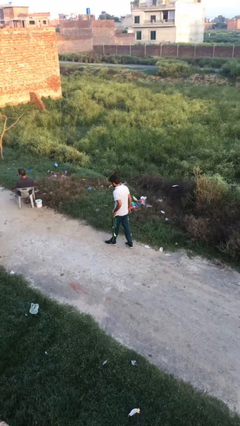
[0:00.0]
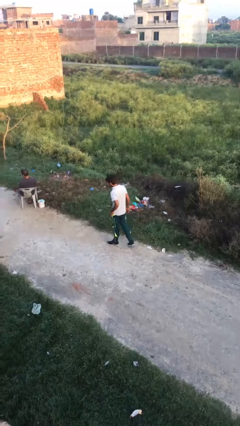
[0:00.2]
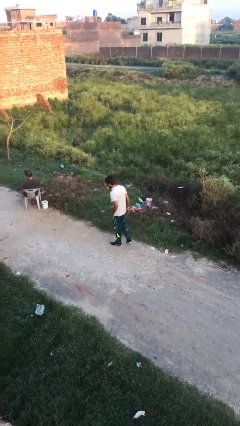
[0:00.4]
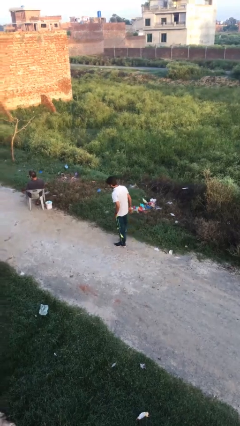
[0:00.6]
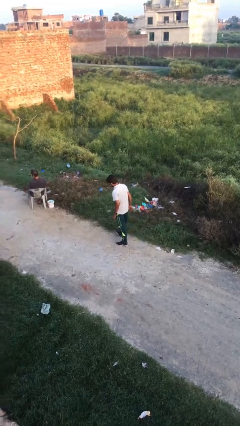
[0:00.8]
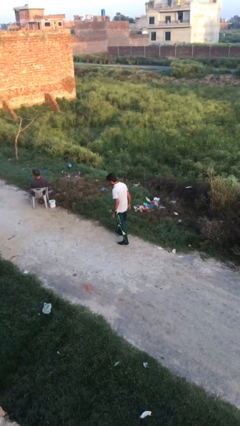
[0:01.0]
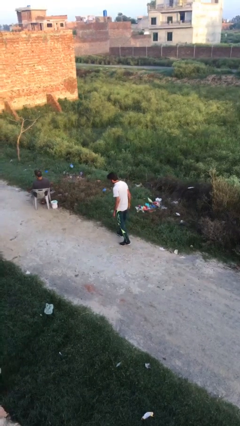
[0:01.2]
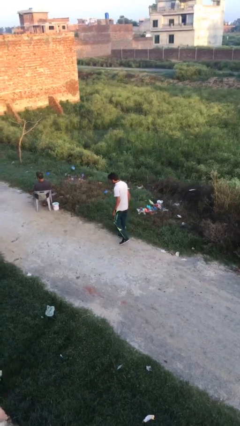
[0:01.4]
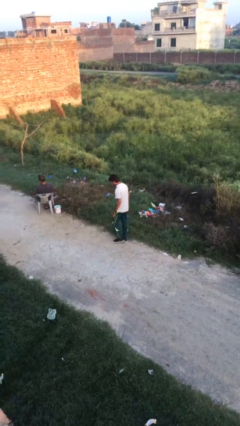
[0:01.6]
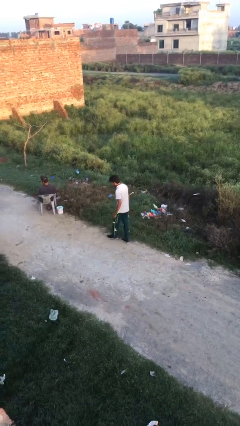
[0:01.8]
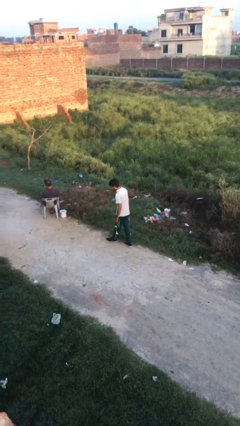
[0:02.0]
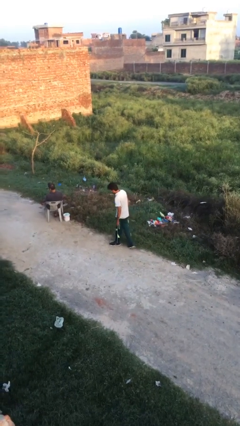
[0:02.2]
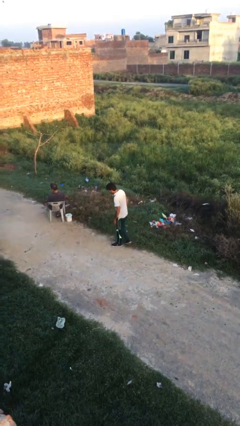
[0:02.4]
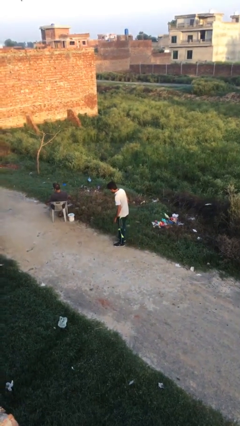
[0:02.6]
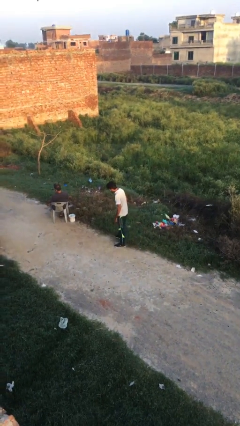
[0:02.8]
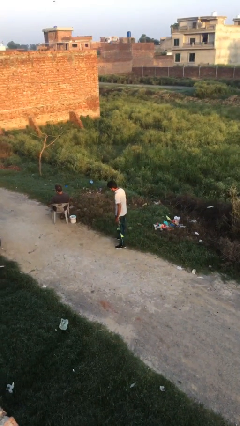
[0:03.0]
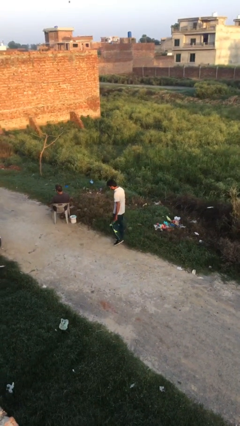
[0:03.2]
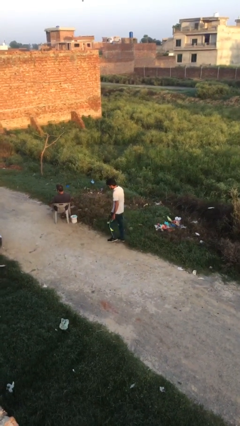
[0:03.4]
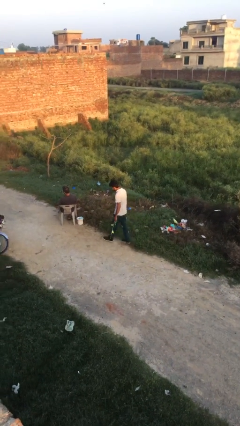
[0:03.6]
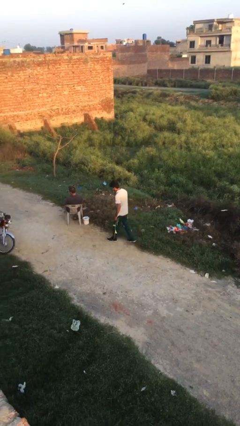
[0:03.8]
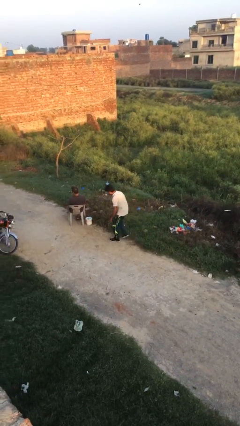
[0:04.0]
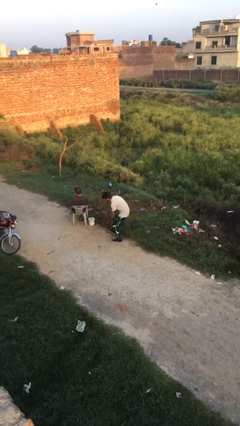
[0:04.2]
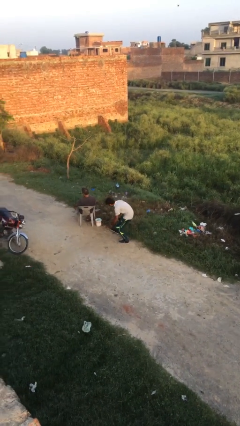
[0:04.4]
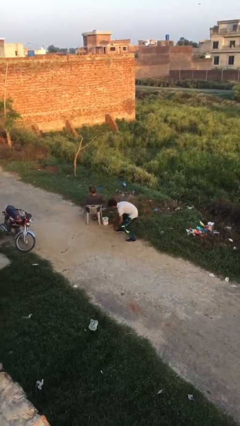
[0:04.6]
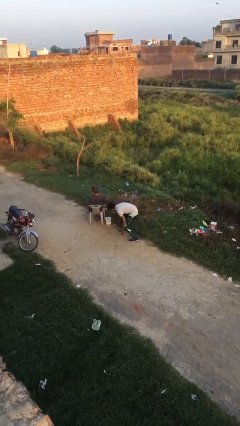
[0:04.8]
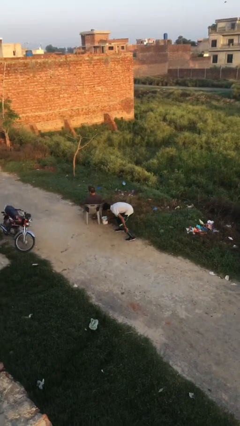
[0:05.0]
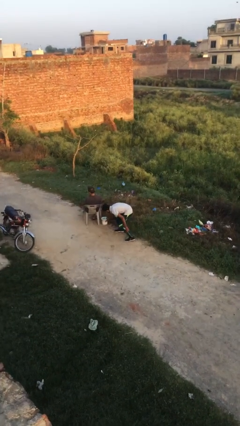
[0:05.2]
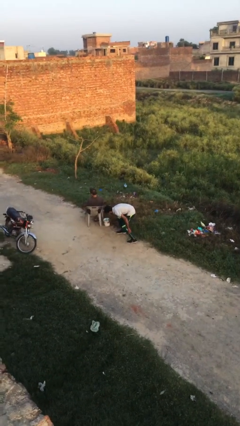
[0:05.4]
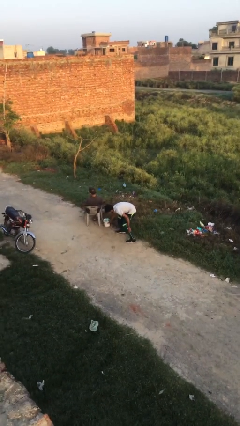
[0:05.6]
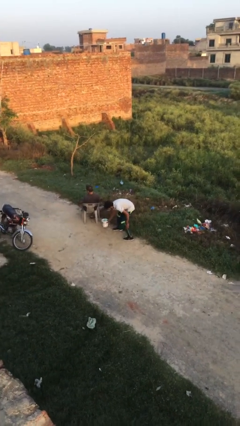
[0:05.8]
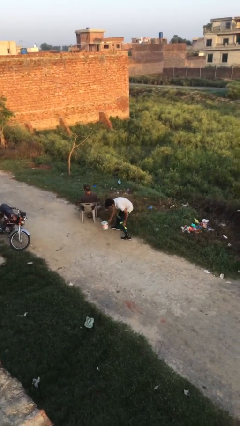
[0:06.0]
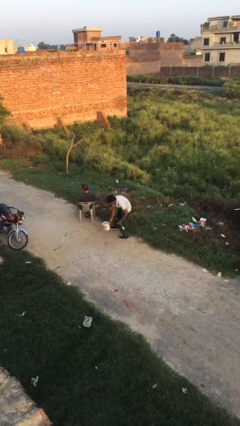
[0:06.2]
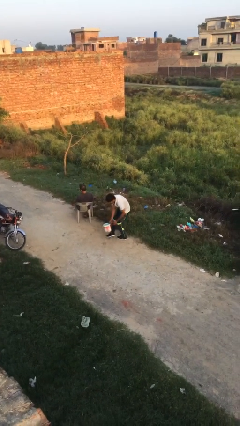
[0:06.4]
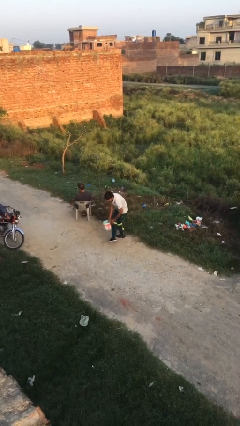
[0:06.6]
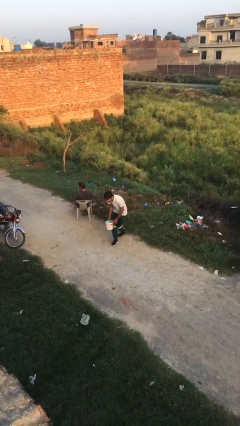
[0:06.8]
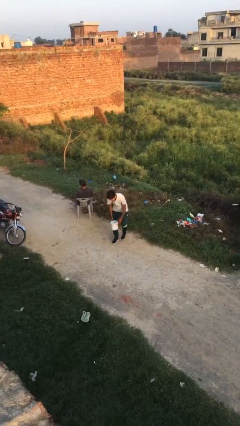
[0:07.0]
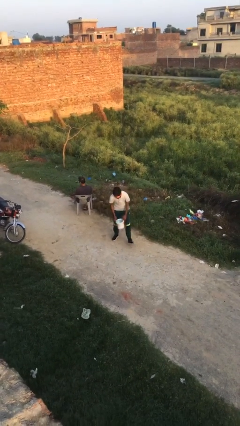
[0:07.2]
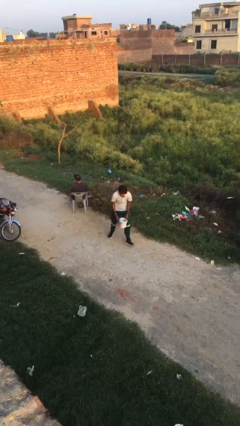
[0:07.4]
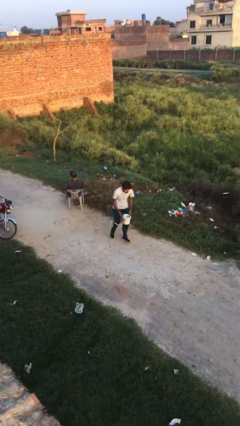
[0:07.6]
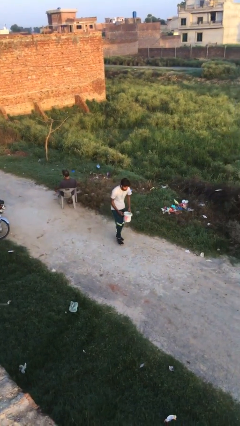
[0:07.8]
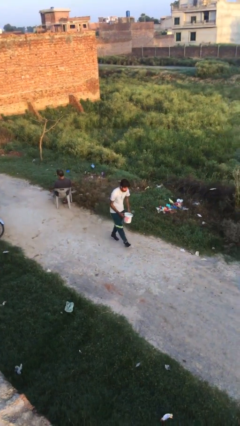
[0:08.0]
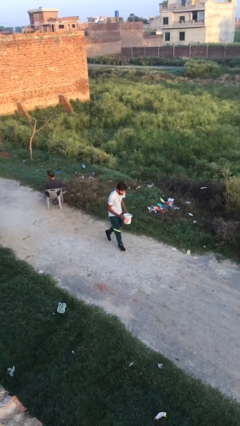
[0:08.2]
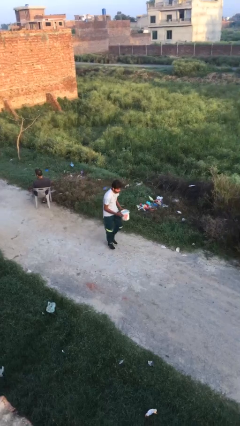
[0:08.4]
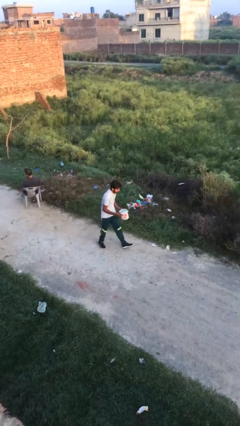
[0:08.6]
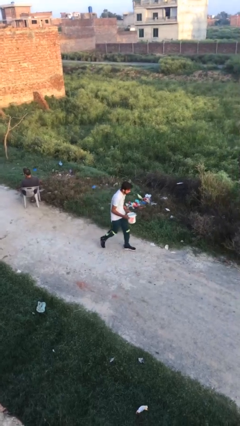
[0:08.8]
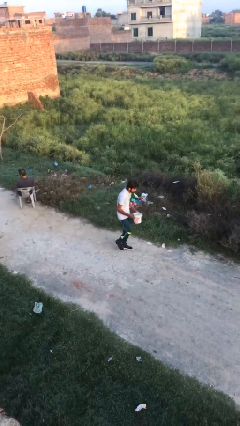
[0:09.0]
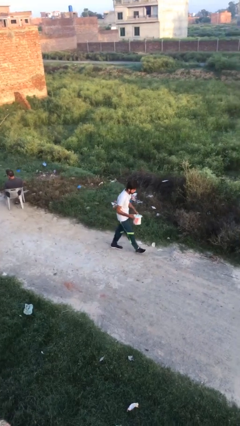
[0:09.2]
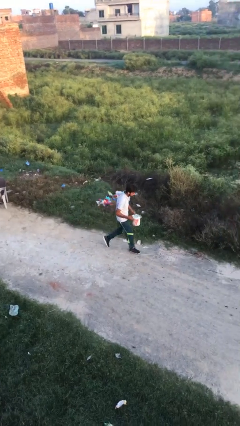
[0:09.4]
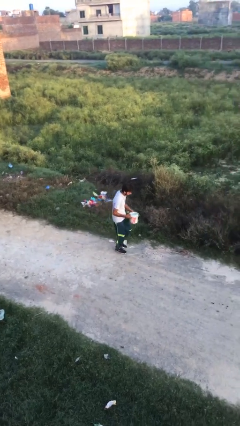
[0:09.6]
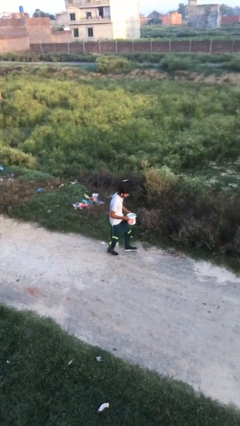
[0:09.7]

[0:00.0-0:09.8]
person steals object from person

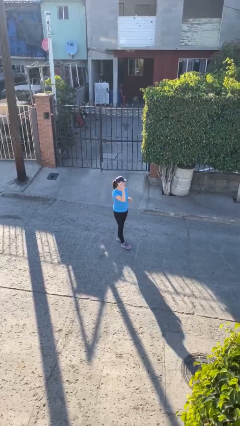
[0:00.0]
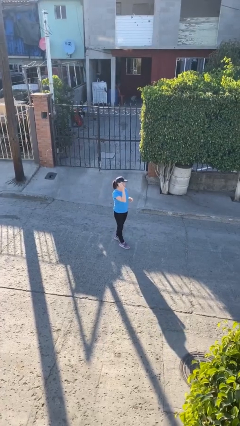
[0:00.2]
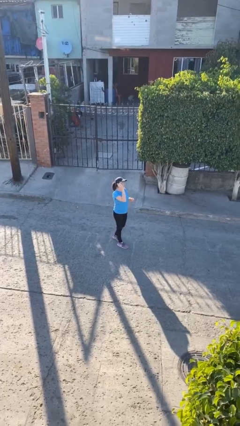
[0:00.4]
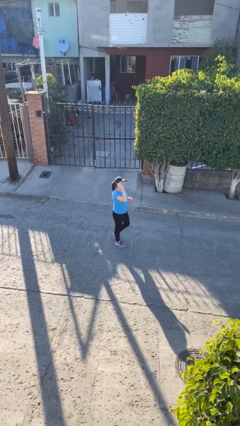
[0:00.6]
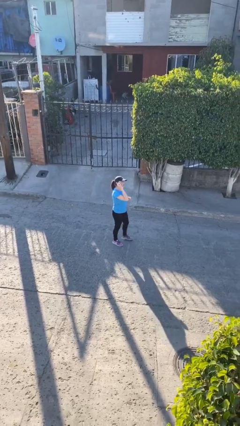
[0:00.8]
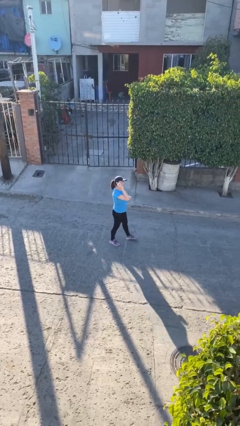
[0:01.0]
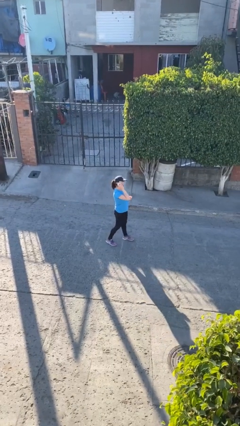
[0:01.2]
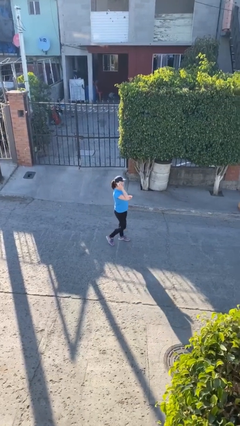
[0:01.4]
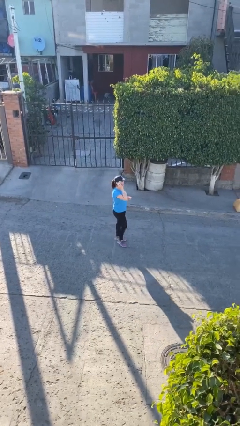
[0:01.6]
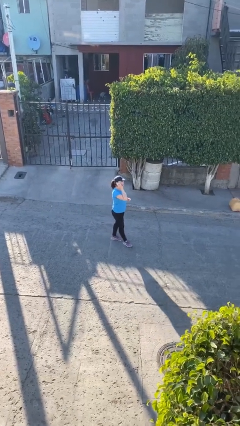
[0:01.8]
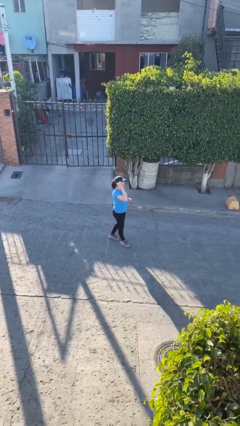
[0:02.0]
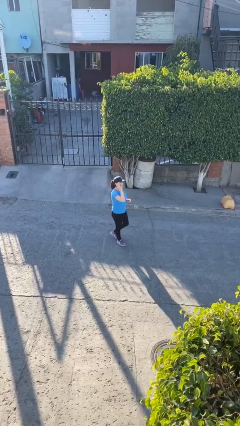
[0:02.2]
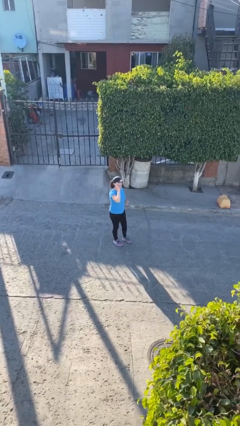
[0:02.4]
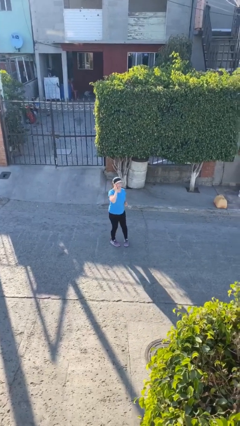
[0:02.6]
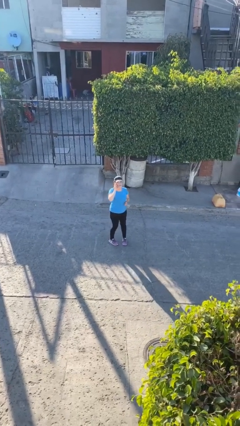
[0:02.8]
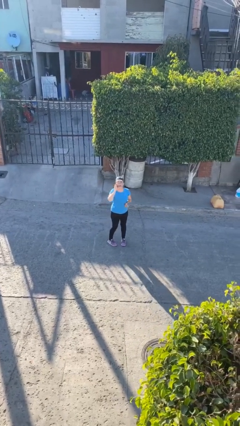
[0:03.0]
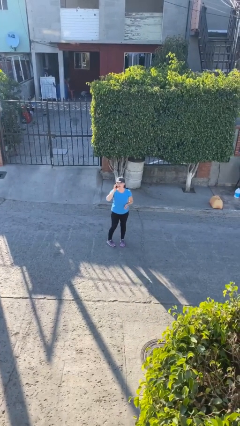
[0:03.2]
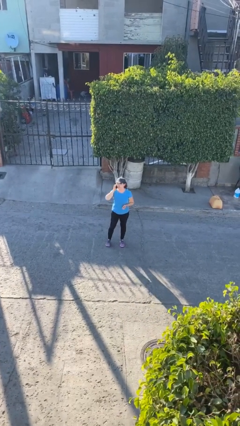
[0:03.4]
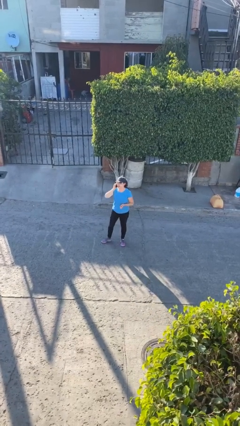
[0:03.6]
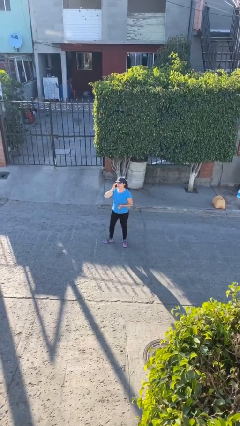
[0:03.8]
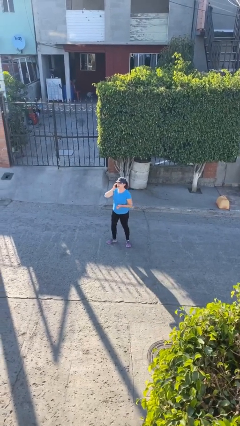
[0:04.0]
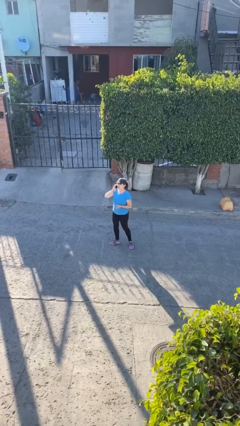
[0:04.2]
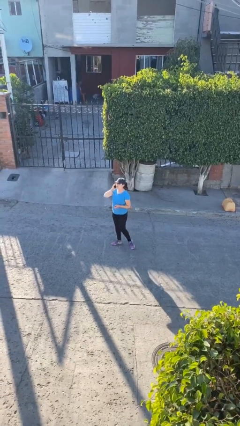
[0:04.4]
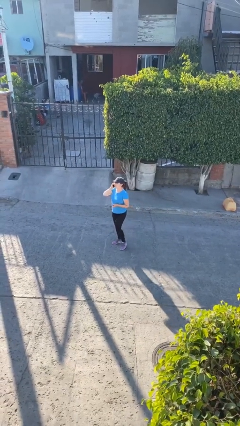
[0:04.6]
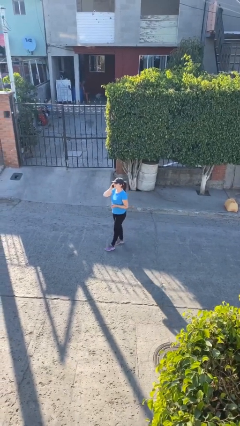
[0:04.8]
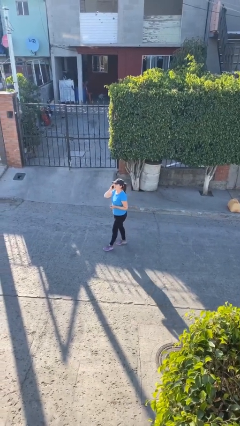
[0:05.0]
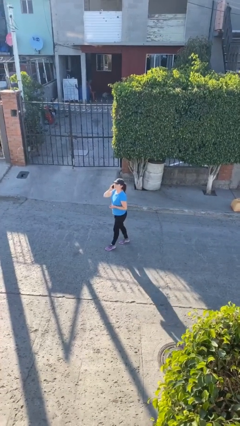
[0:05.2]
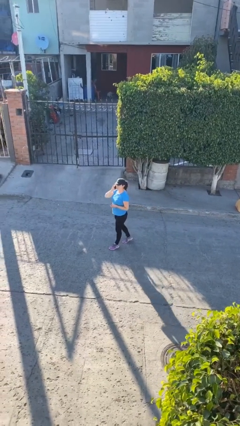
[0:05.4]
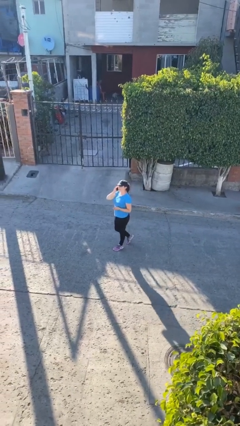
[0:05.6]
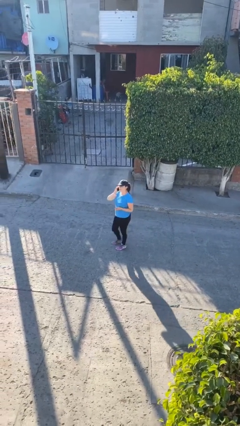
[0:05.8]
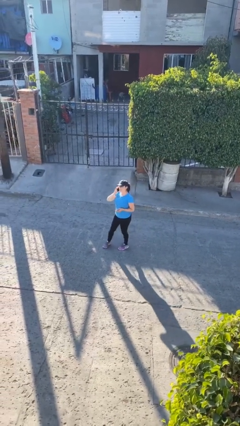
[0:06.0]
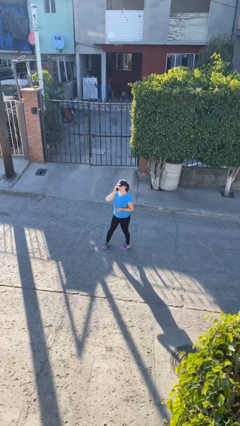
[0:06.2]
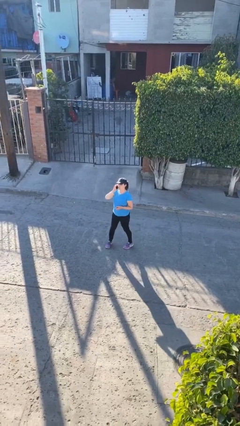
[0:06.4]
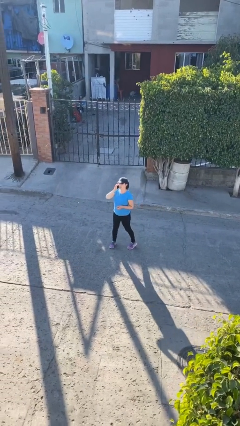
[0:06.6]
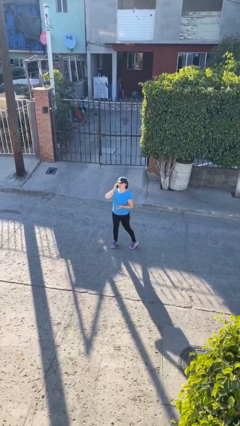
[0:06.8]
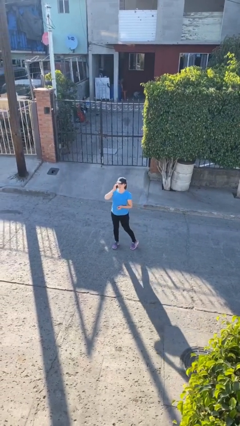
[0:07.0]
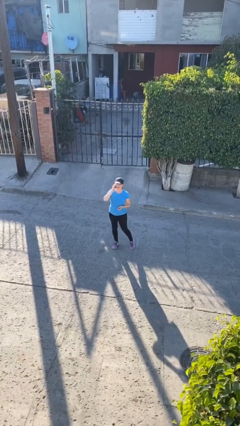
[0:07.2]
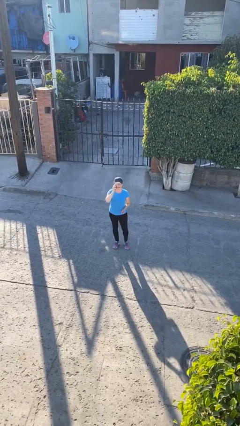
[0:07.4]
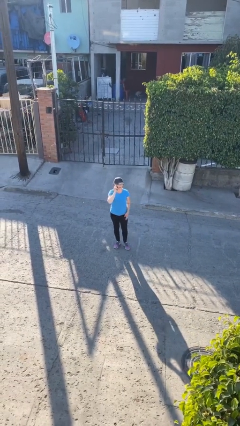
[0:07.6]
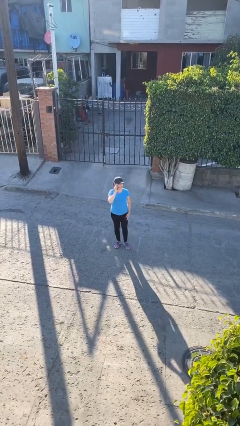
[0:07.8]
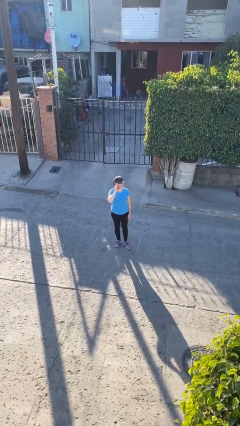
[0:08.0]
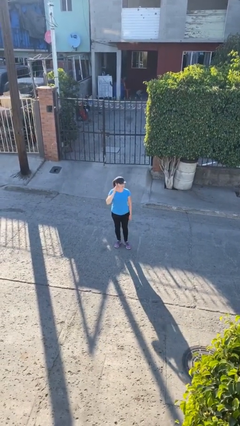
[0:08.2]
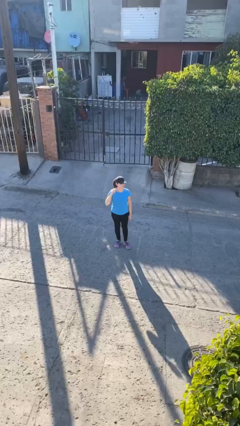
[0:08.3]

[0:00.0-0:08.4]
person talks on phone

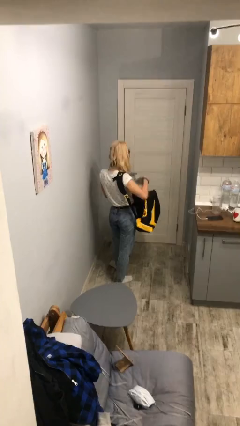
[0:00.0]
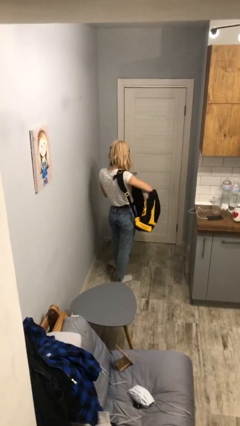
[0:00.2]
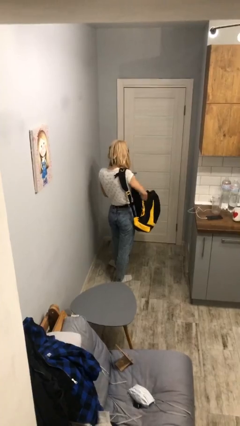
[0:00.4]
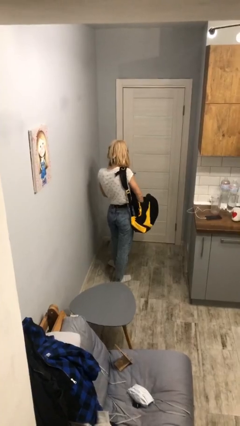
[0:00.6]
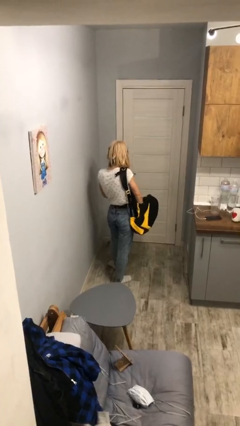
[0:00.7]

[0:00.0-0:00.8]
person puts object into backpack
